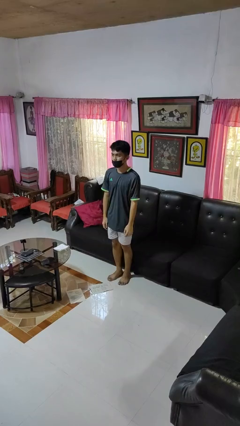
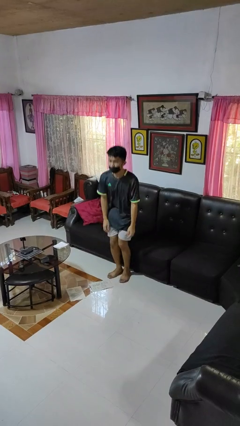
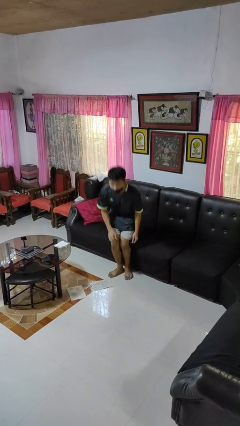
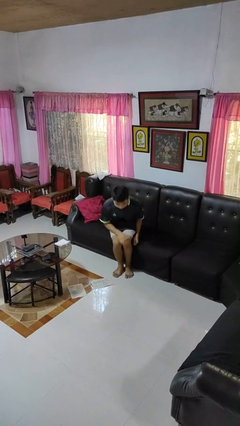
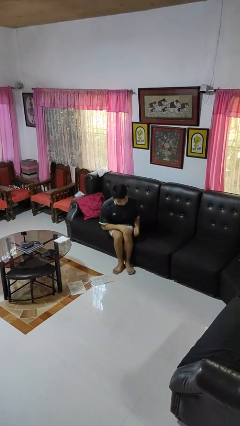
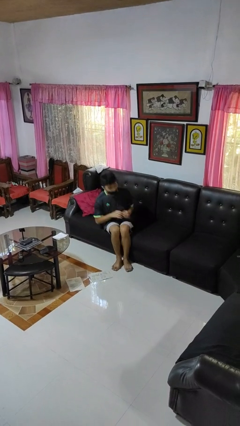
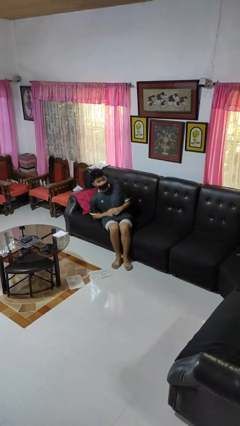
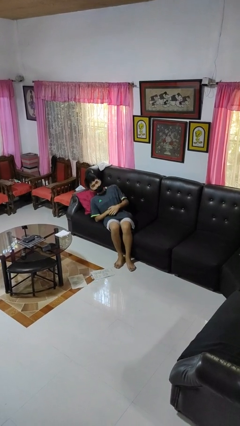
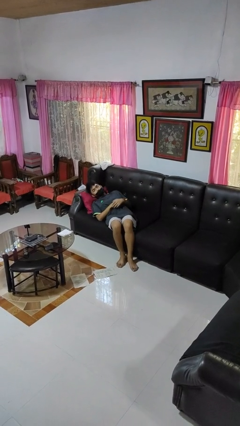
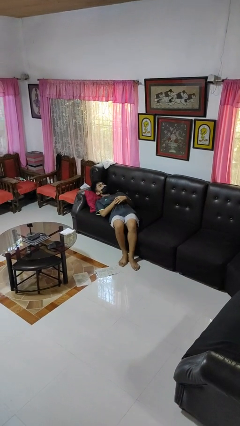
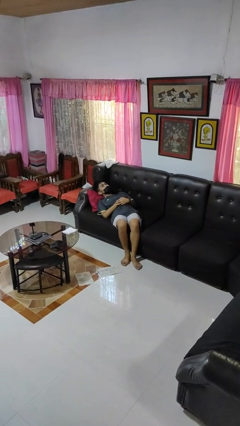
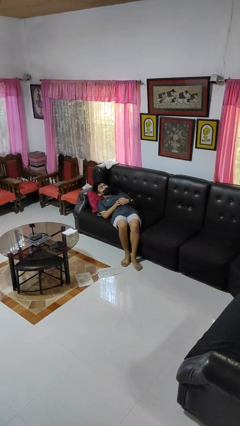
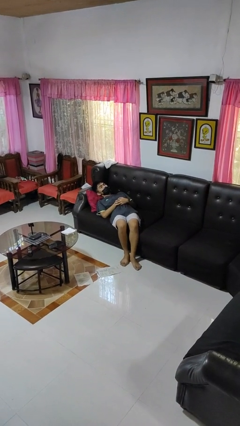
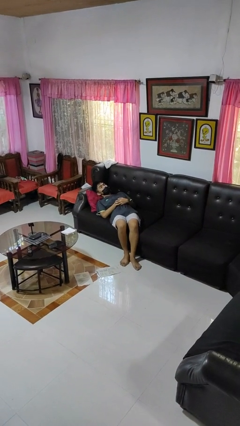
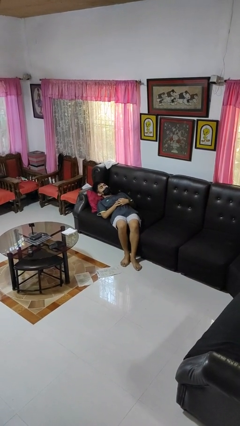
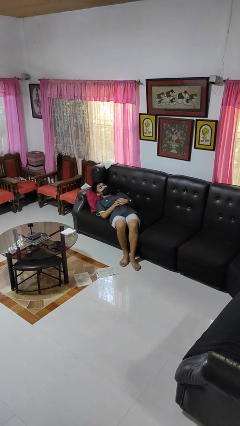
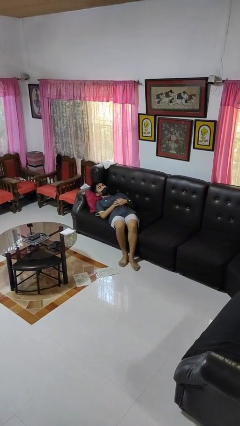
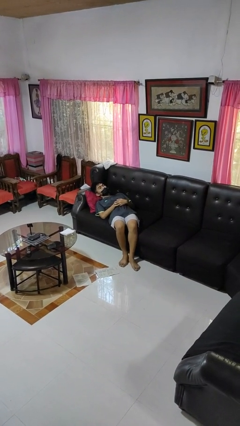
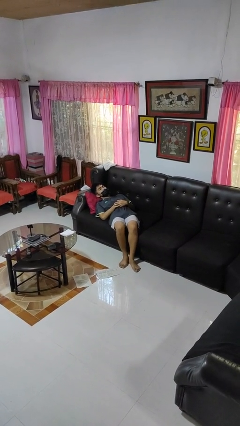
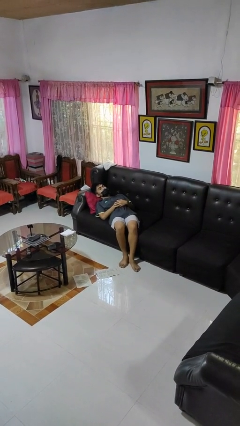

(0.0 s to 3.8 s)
person lies down on couch

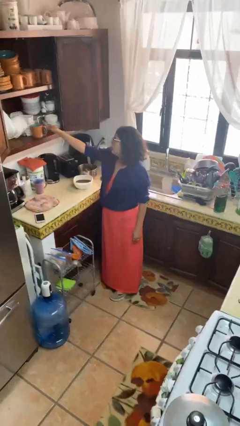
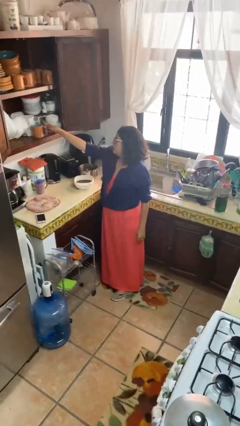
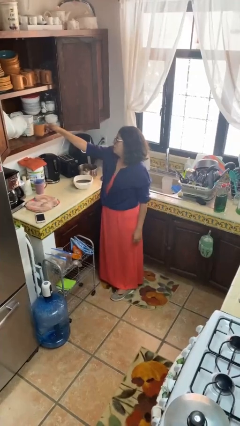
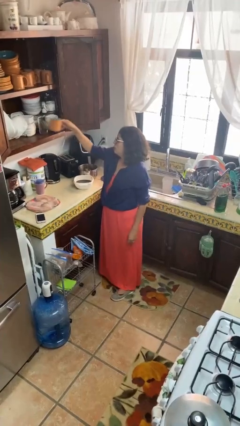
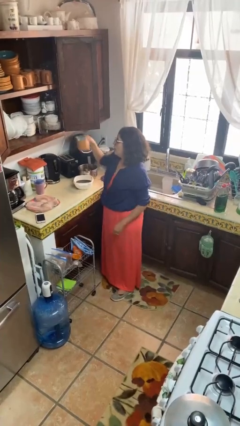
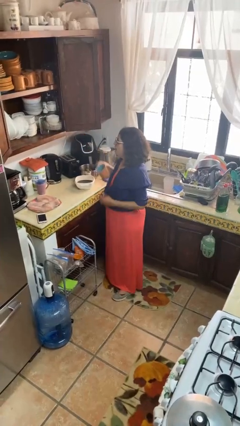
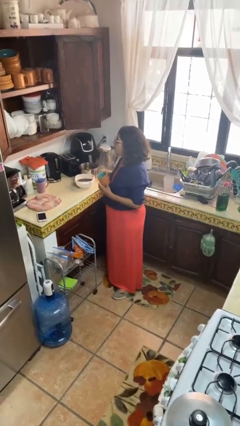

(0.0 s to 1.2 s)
person picks up object from cabinet

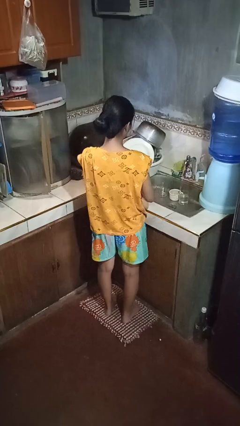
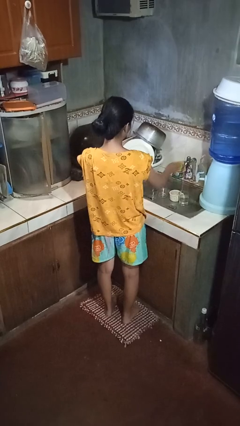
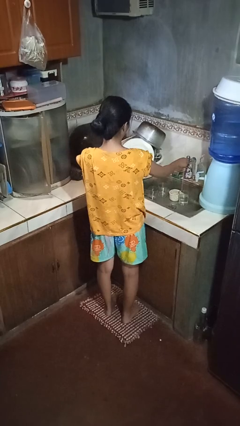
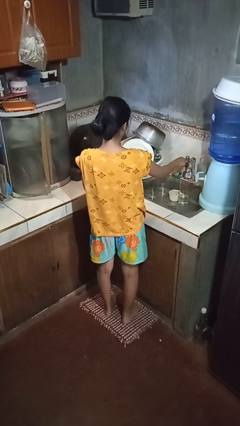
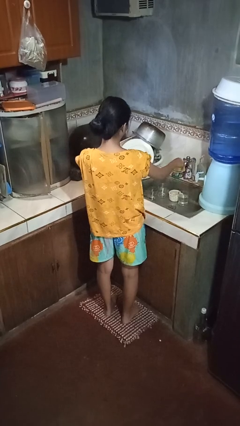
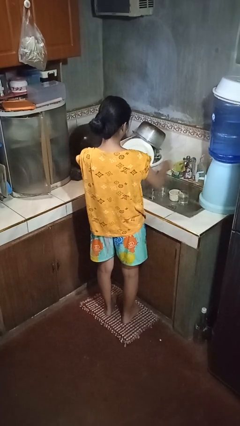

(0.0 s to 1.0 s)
person turns off faucet

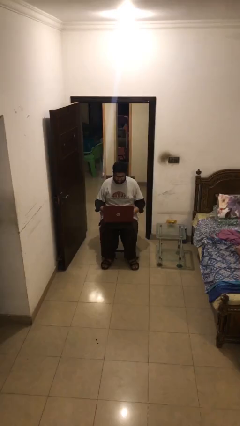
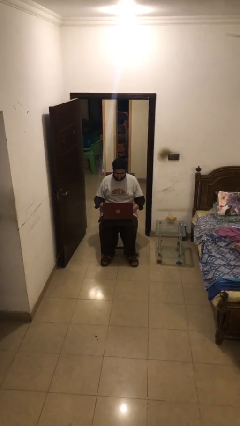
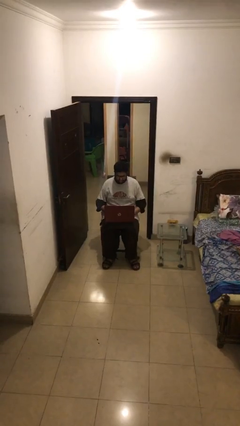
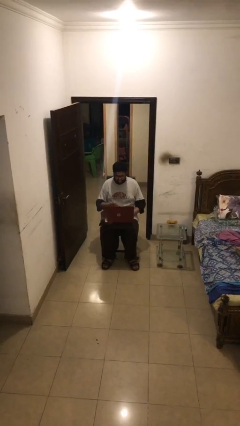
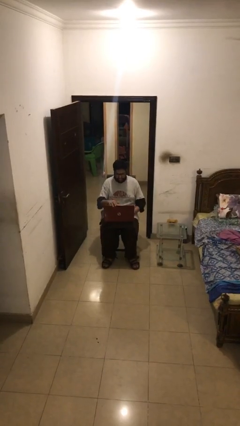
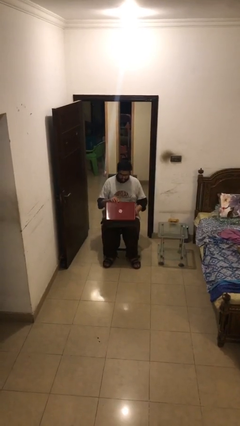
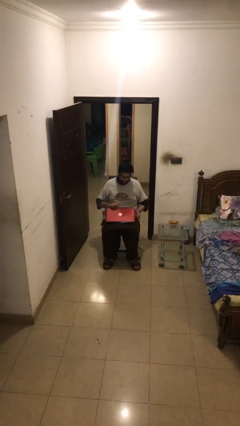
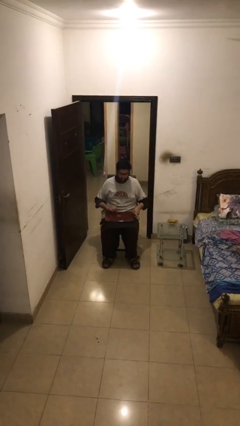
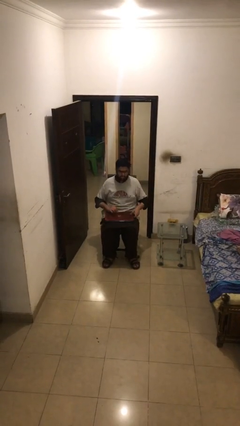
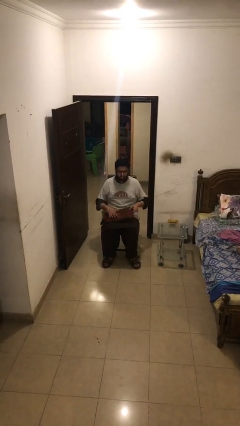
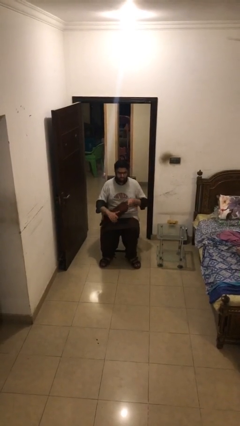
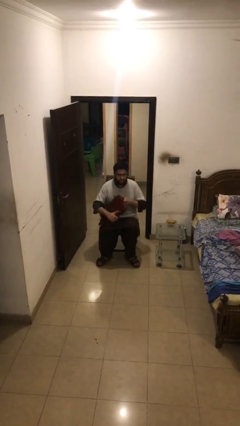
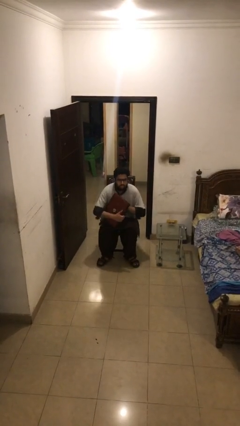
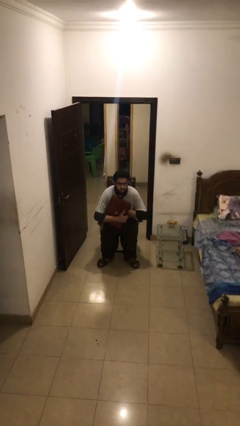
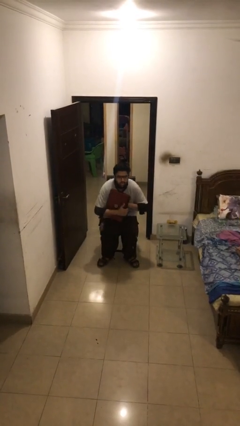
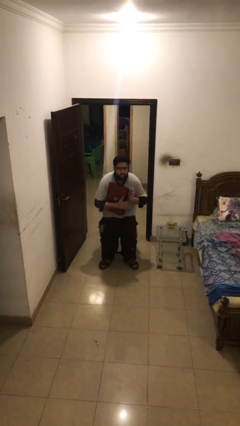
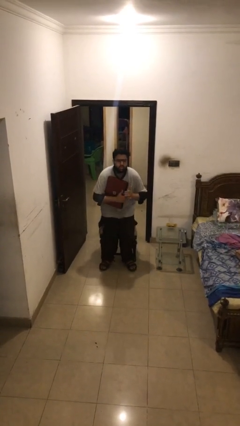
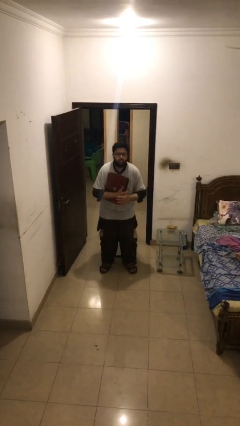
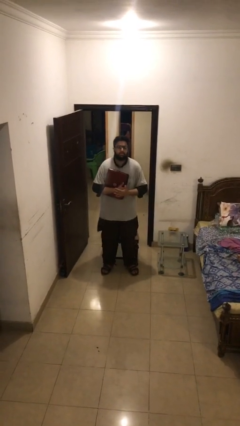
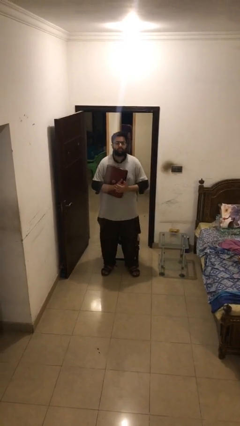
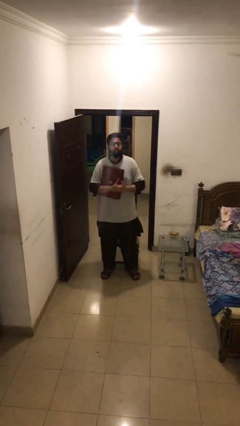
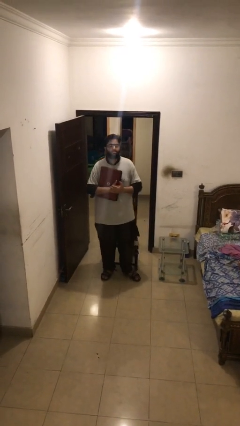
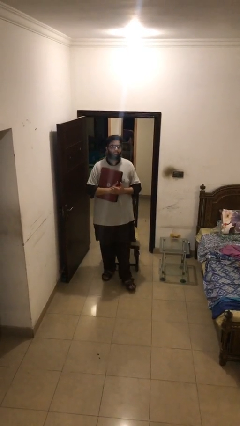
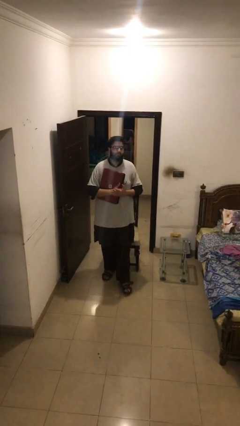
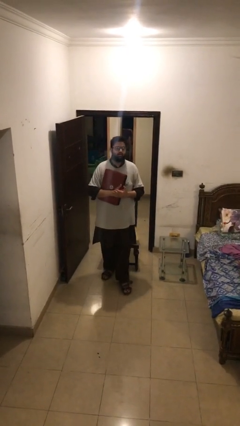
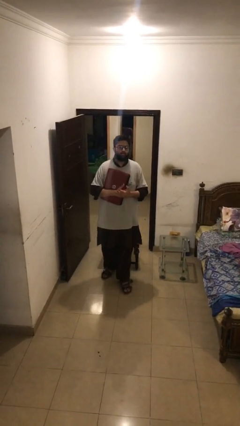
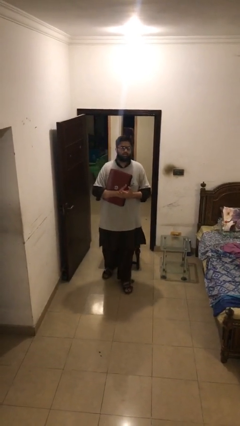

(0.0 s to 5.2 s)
person stands up

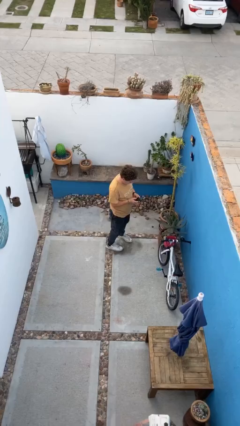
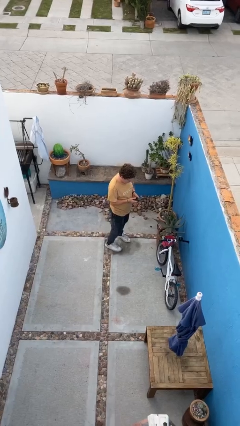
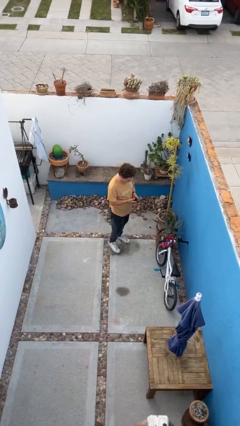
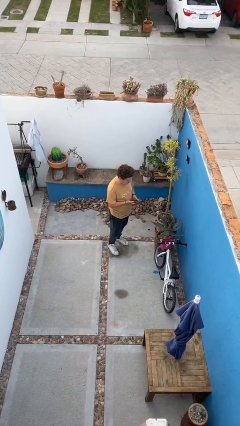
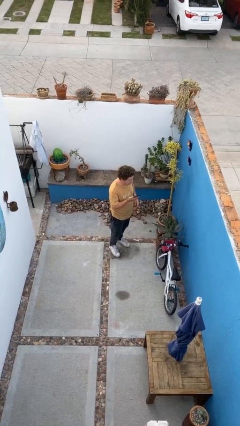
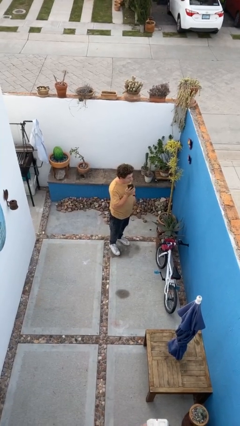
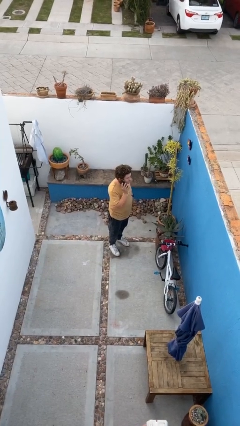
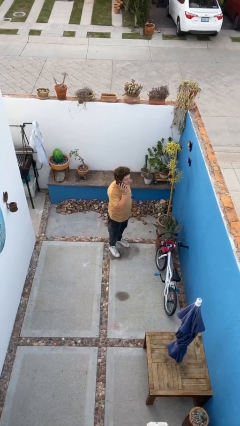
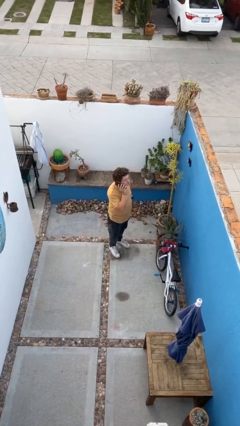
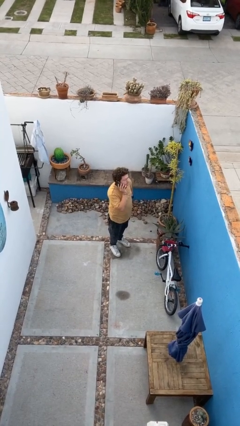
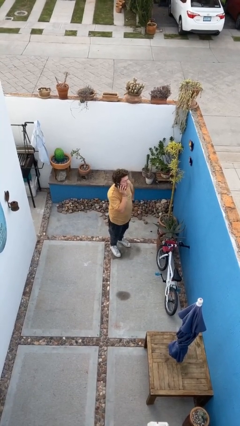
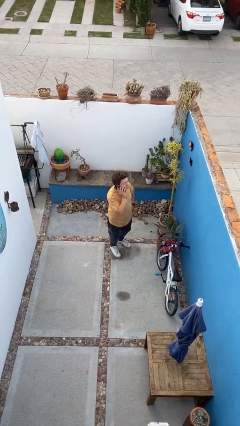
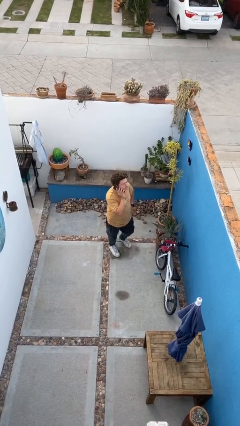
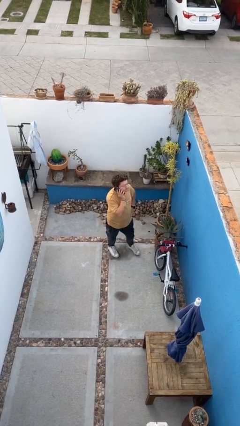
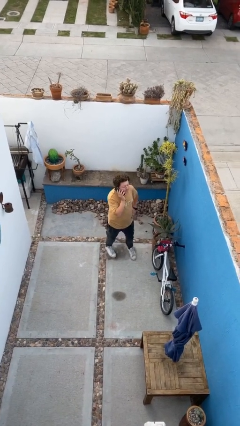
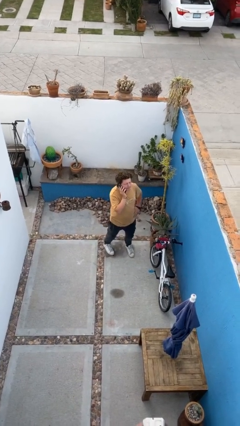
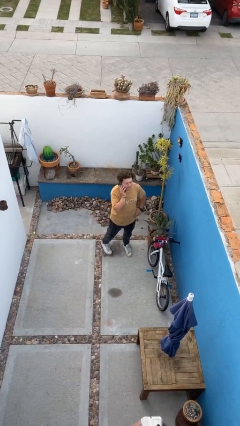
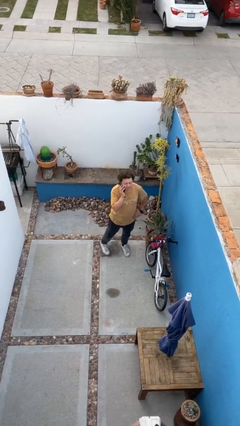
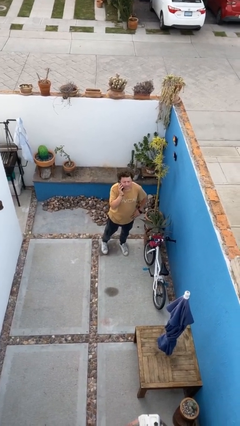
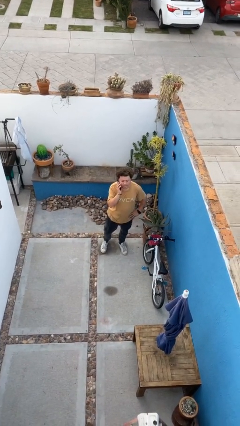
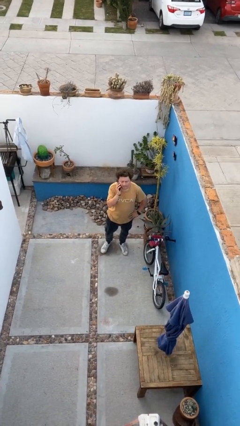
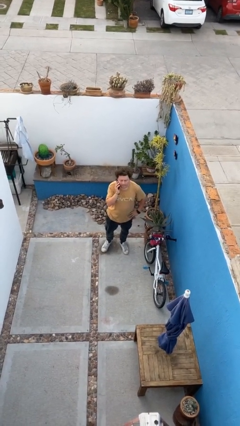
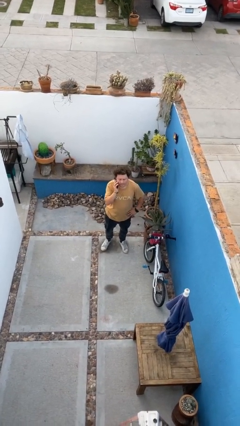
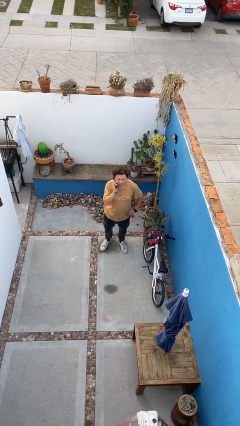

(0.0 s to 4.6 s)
person talks on phone

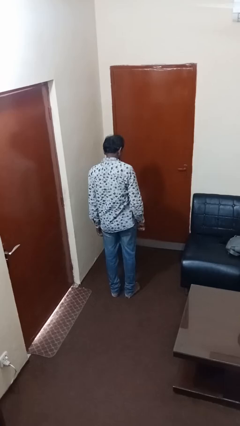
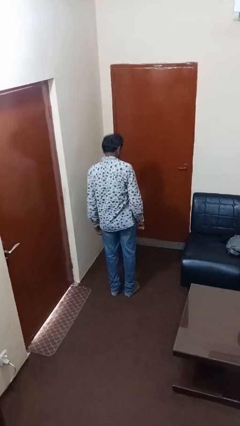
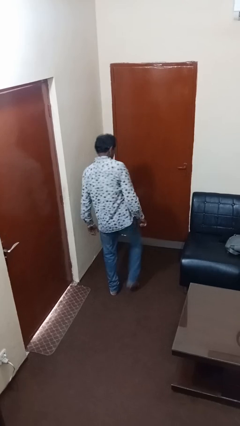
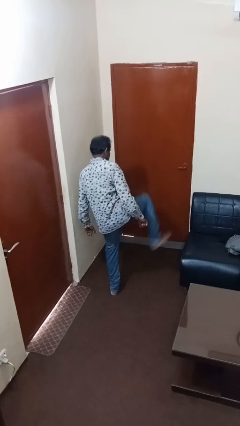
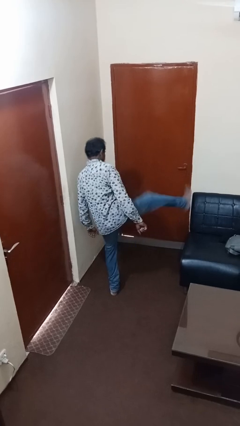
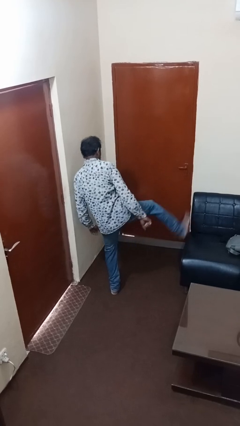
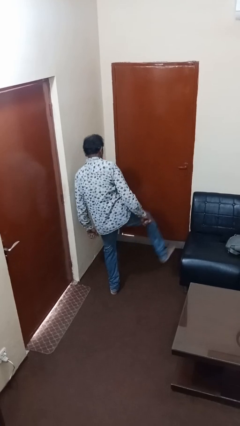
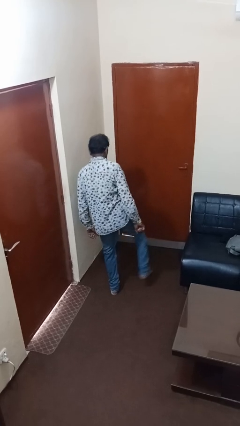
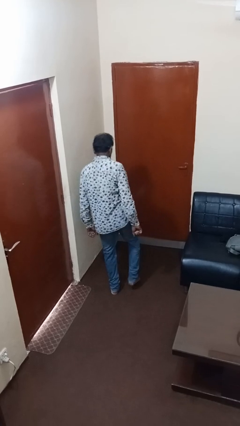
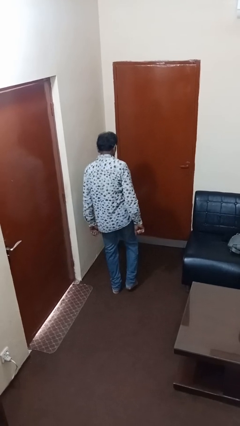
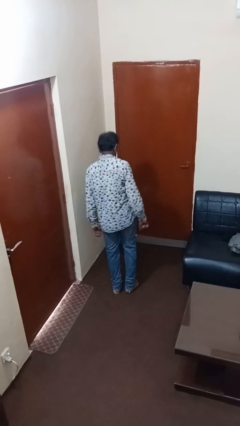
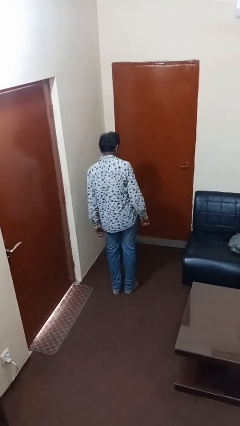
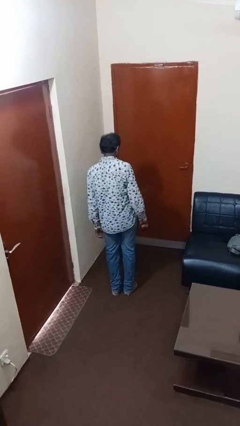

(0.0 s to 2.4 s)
person karate kicks
